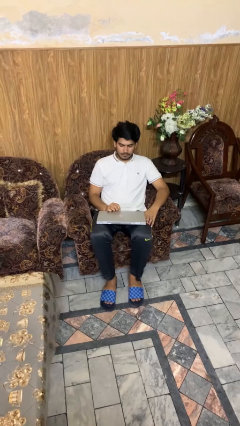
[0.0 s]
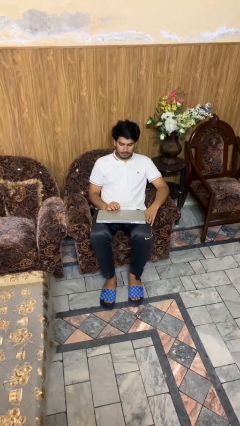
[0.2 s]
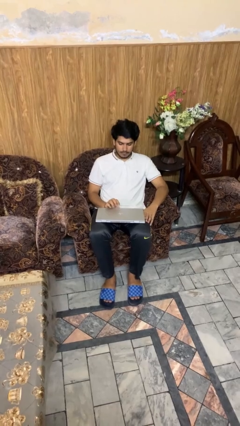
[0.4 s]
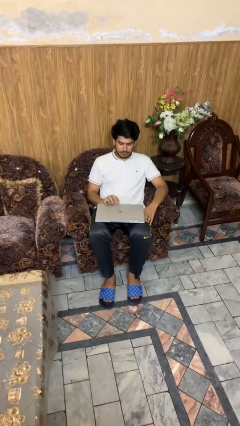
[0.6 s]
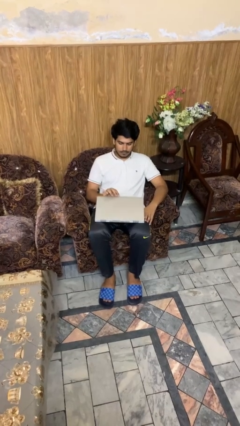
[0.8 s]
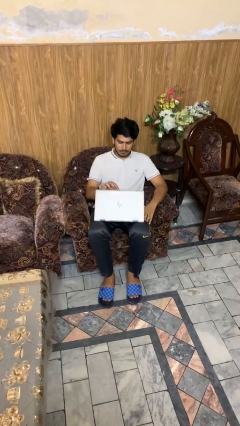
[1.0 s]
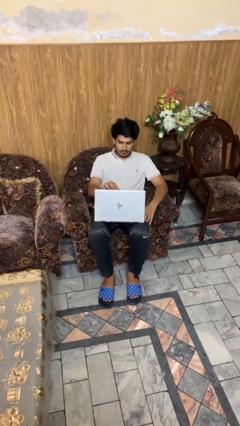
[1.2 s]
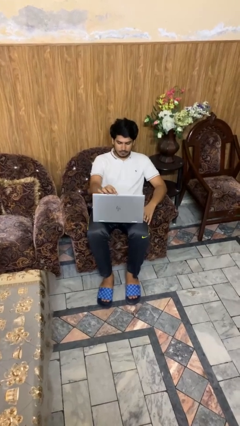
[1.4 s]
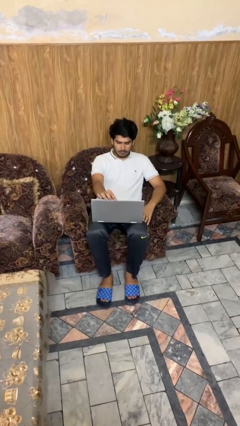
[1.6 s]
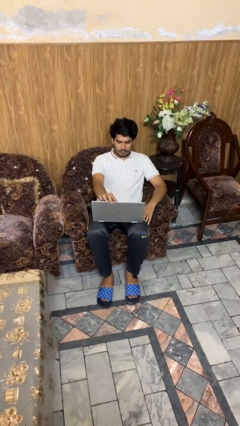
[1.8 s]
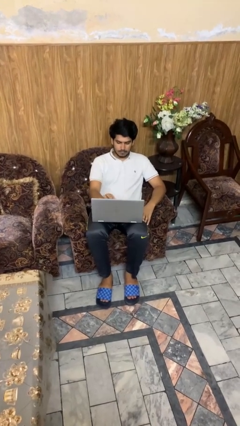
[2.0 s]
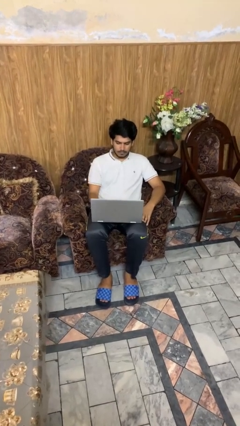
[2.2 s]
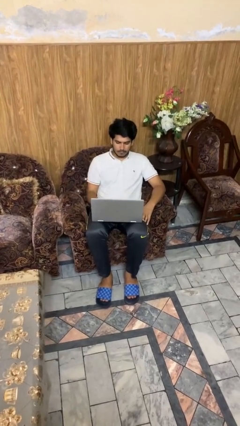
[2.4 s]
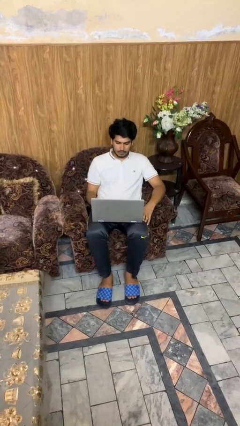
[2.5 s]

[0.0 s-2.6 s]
person opens laptop

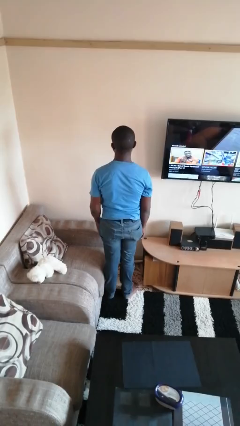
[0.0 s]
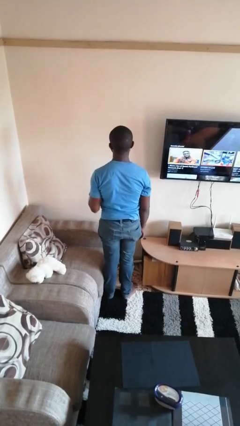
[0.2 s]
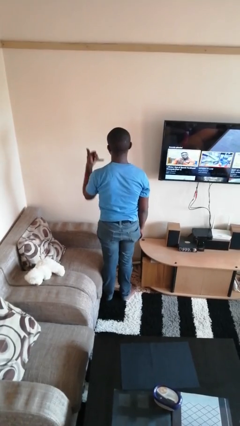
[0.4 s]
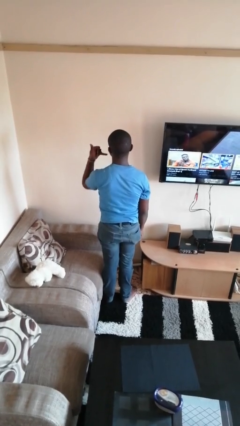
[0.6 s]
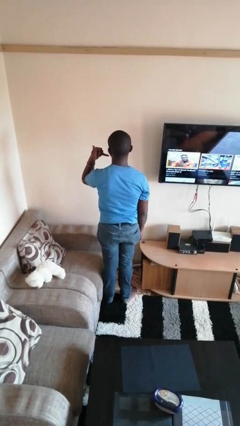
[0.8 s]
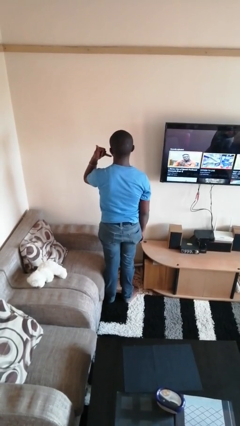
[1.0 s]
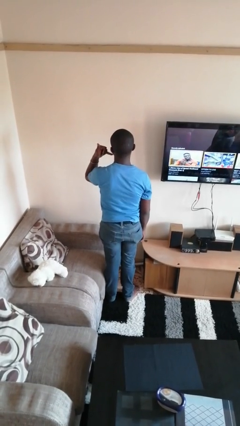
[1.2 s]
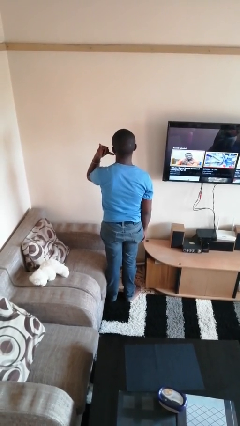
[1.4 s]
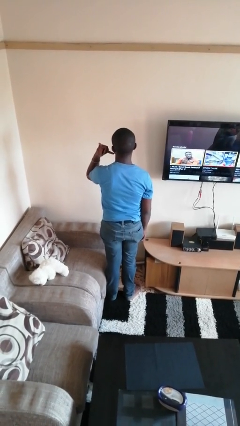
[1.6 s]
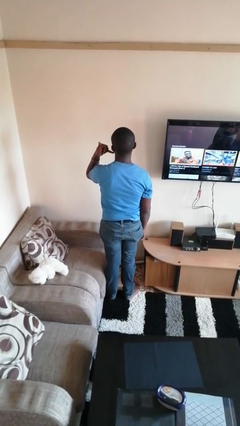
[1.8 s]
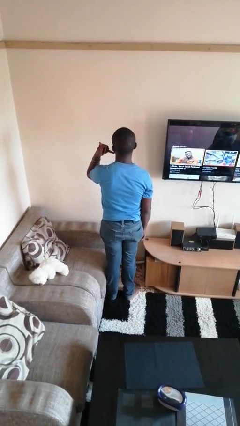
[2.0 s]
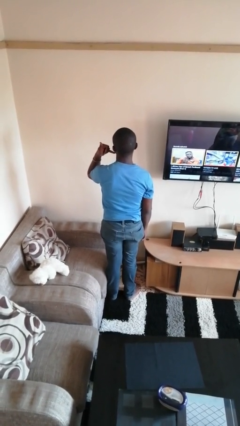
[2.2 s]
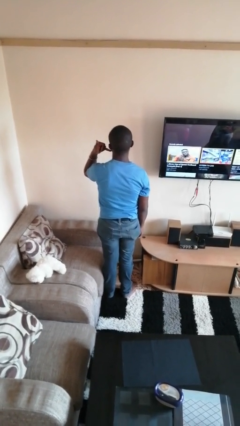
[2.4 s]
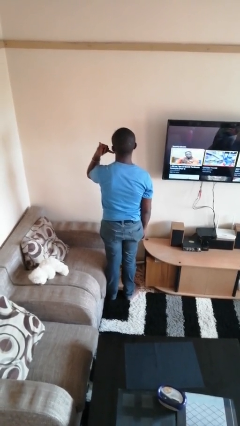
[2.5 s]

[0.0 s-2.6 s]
person gestures call me

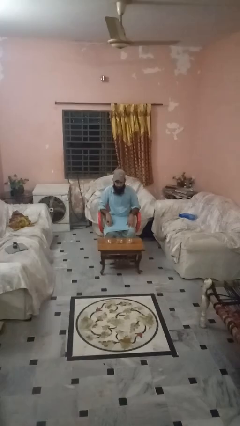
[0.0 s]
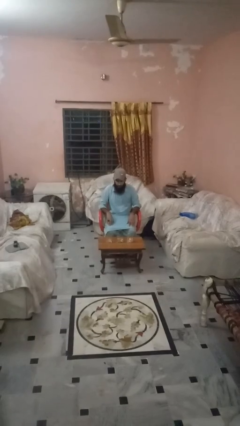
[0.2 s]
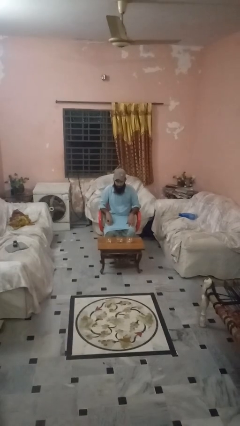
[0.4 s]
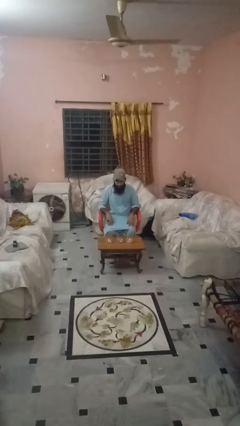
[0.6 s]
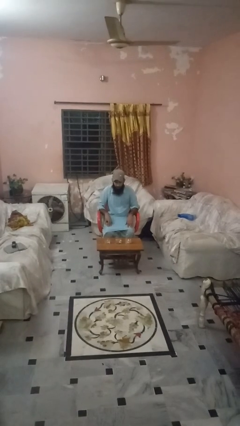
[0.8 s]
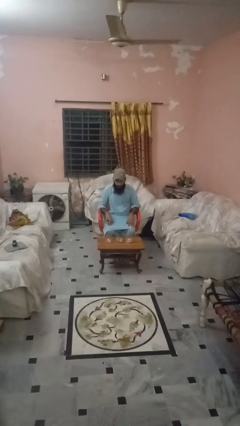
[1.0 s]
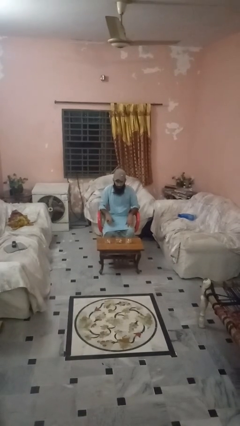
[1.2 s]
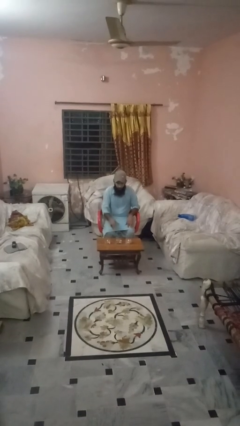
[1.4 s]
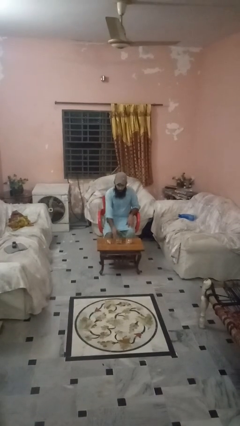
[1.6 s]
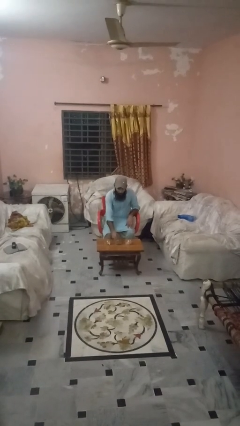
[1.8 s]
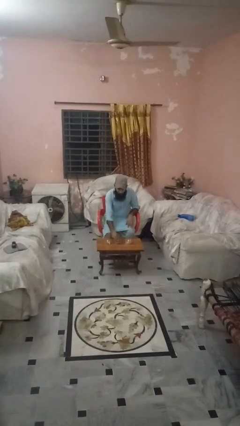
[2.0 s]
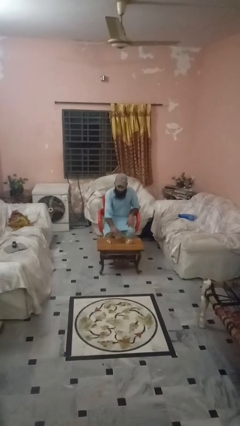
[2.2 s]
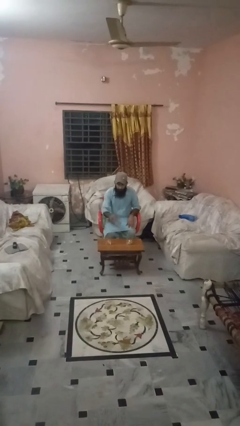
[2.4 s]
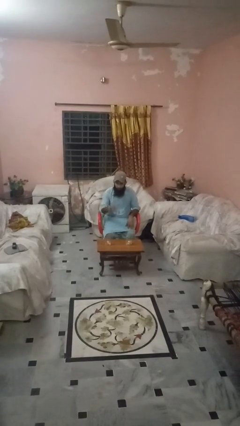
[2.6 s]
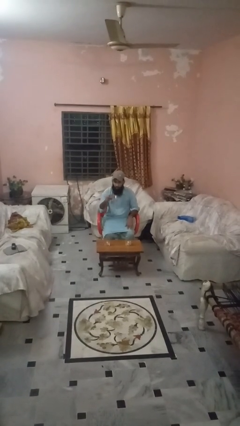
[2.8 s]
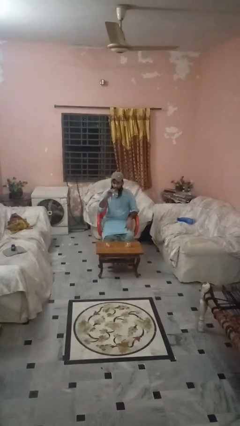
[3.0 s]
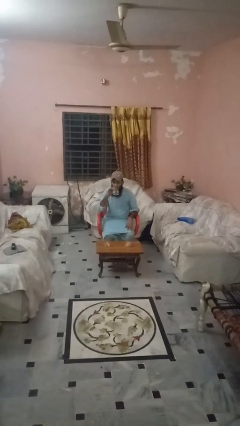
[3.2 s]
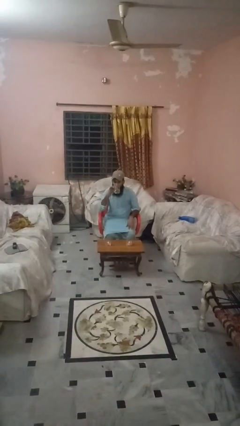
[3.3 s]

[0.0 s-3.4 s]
person picks up object from table

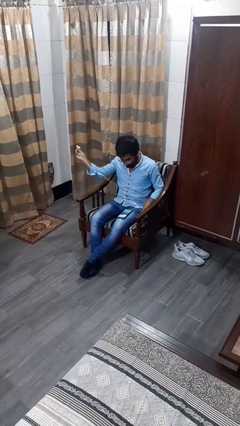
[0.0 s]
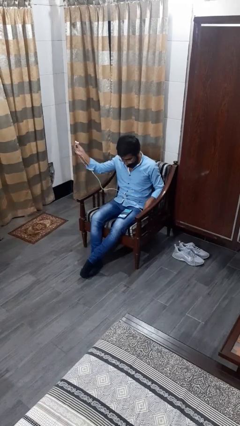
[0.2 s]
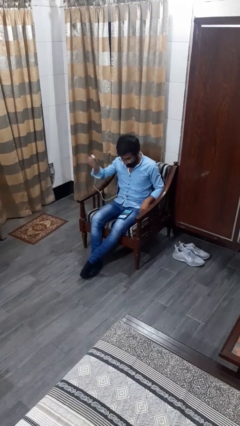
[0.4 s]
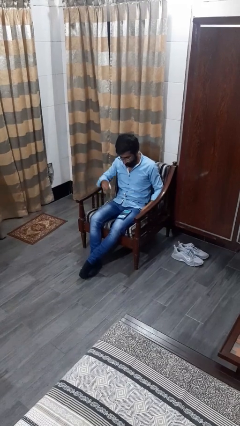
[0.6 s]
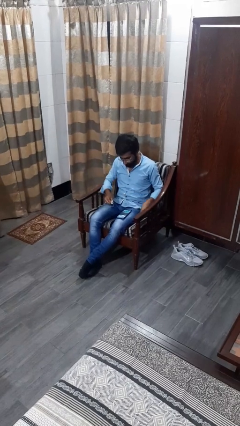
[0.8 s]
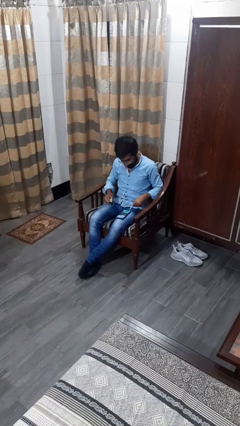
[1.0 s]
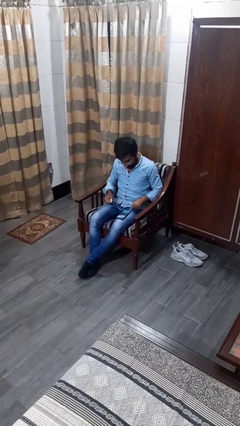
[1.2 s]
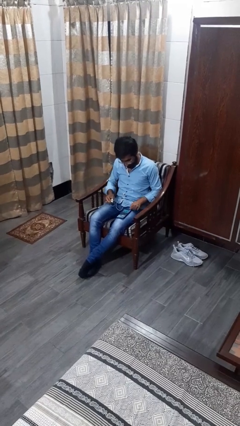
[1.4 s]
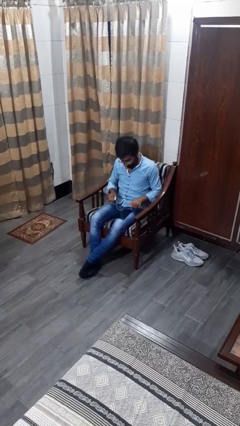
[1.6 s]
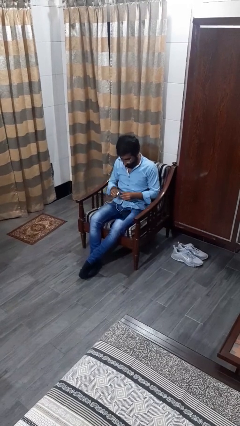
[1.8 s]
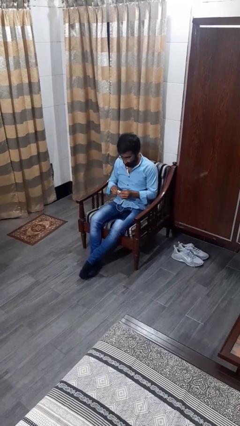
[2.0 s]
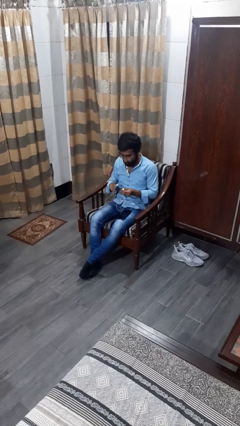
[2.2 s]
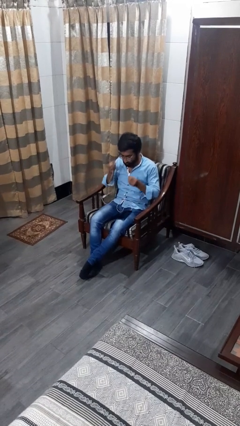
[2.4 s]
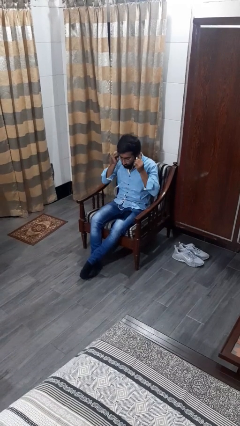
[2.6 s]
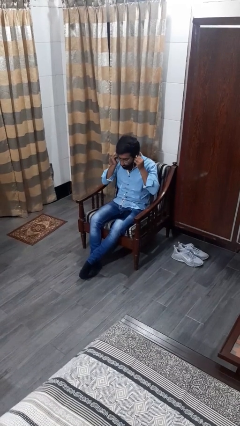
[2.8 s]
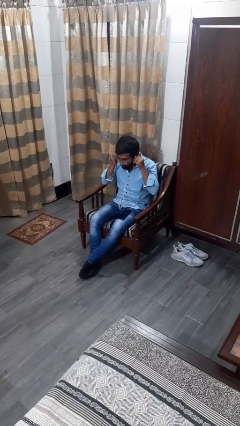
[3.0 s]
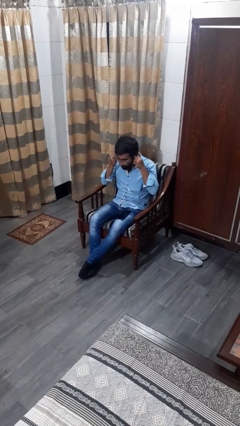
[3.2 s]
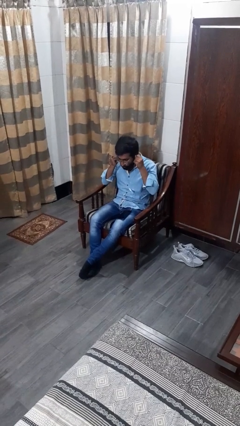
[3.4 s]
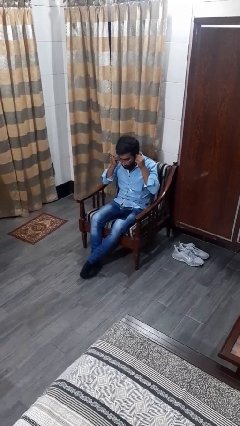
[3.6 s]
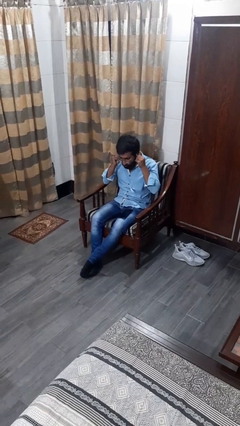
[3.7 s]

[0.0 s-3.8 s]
person puts on headphones

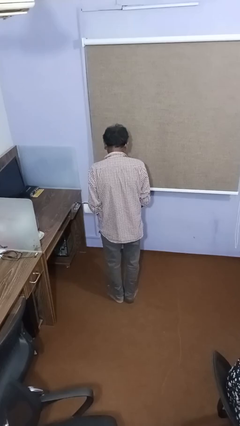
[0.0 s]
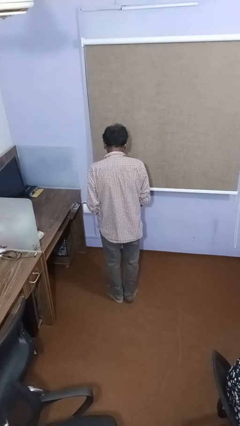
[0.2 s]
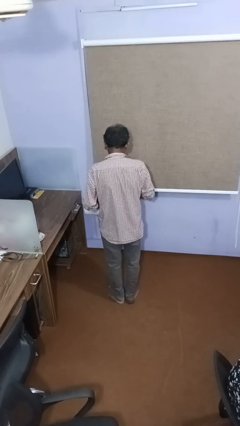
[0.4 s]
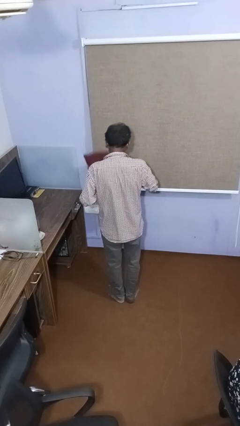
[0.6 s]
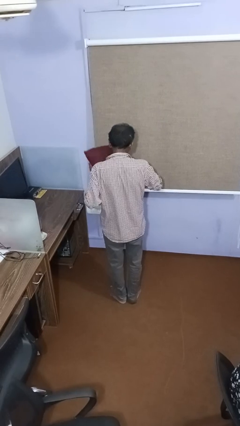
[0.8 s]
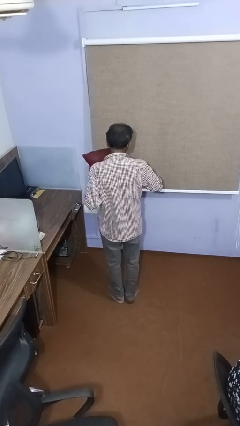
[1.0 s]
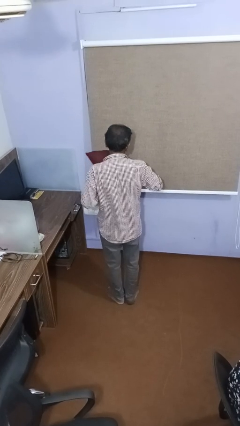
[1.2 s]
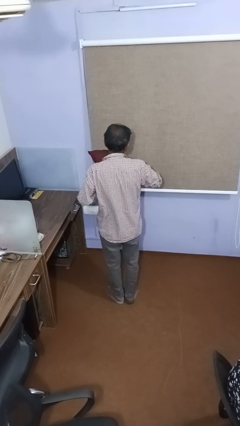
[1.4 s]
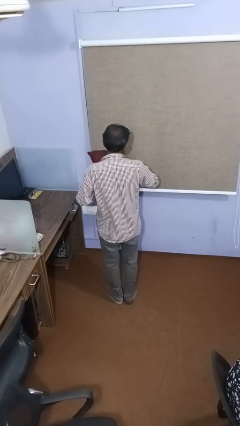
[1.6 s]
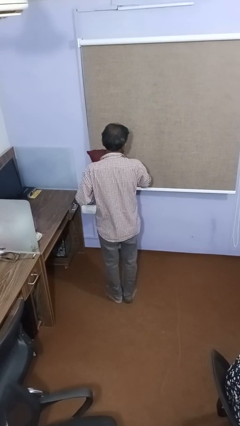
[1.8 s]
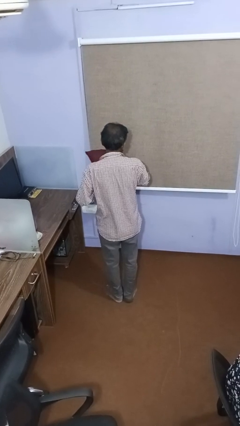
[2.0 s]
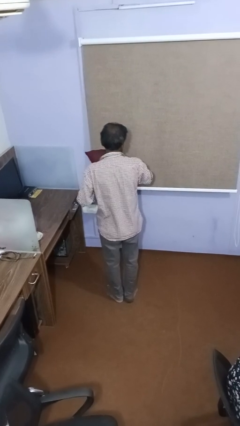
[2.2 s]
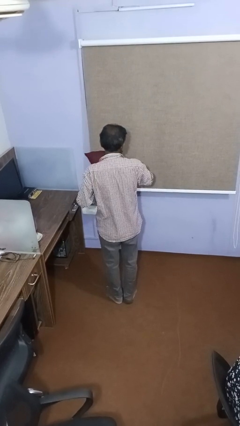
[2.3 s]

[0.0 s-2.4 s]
person hugs stuffed animal

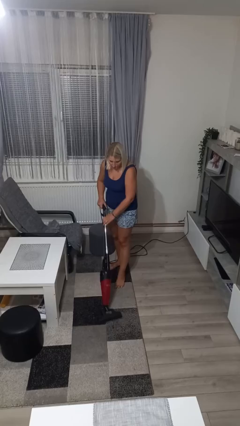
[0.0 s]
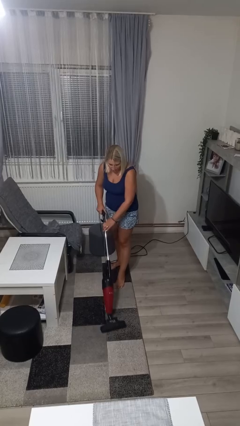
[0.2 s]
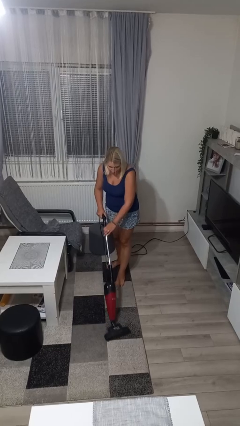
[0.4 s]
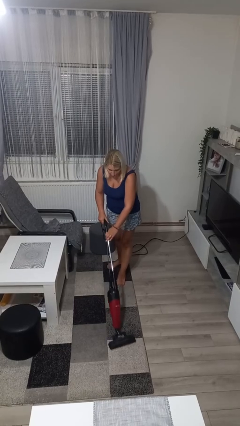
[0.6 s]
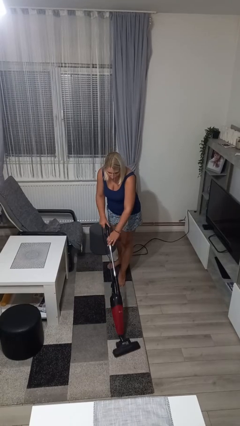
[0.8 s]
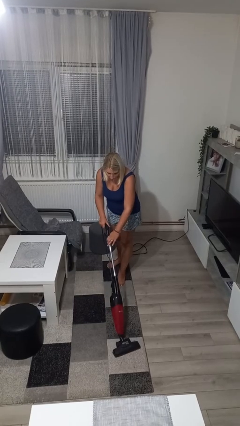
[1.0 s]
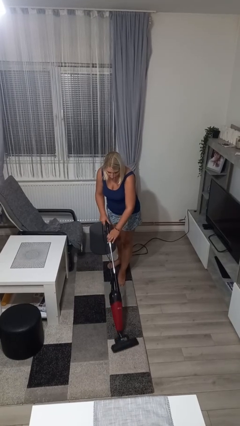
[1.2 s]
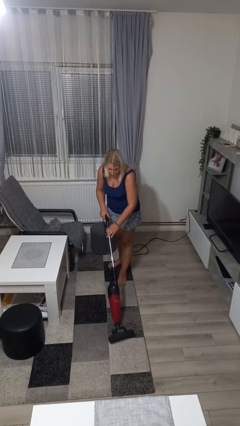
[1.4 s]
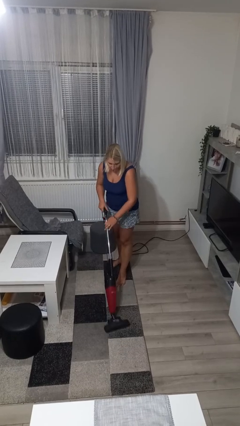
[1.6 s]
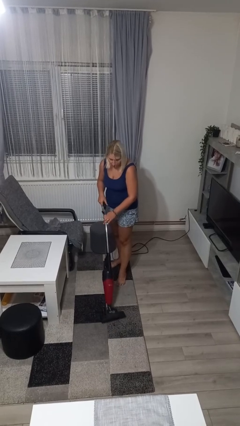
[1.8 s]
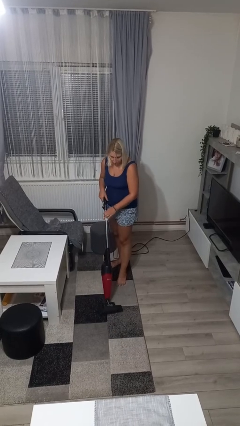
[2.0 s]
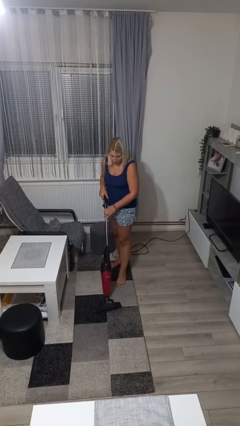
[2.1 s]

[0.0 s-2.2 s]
person vacuums carpet

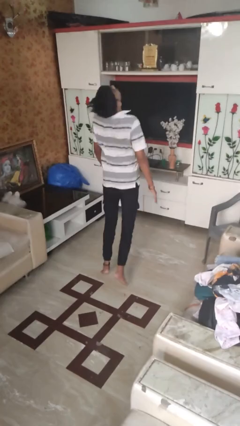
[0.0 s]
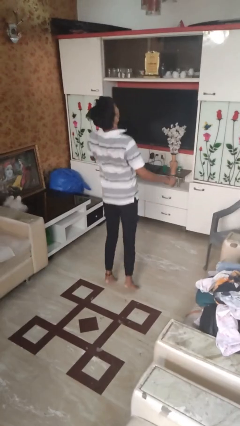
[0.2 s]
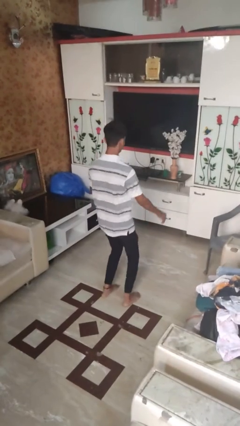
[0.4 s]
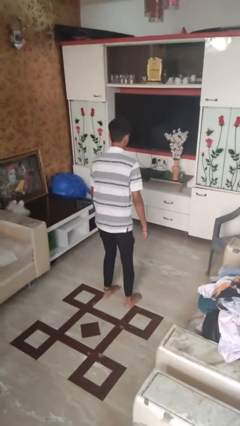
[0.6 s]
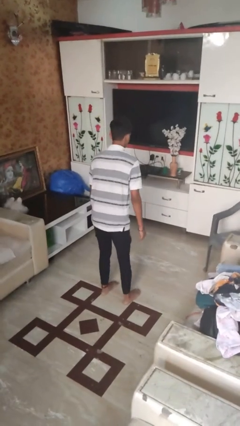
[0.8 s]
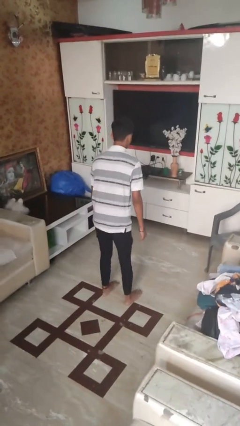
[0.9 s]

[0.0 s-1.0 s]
person somersaults
